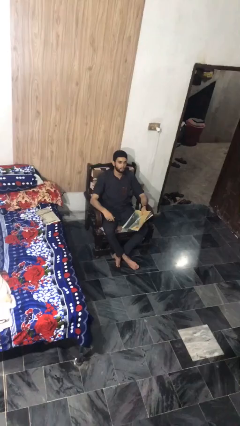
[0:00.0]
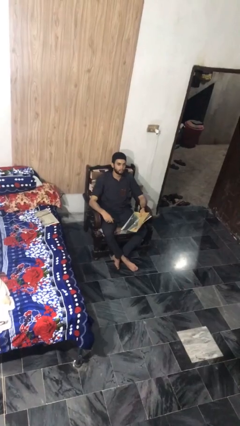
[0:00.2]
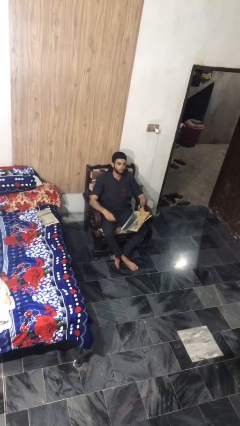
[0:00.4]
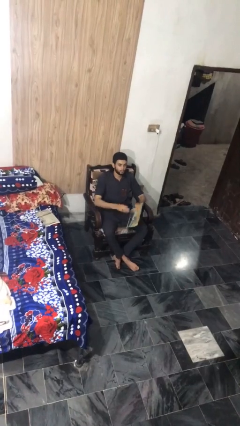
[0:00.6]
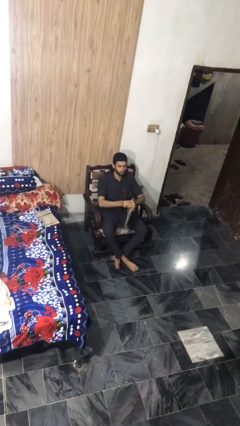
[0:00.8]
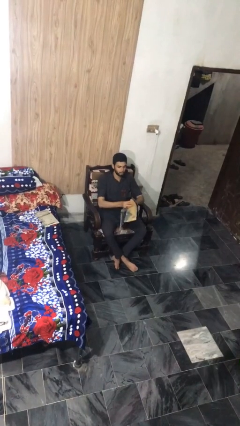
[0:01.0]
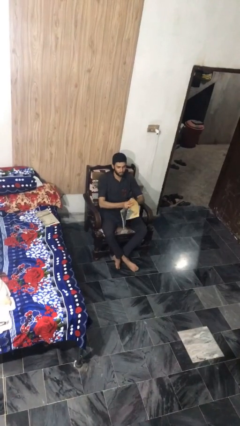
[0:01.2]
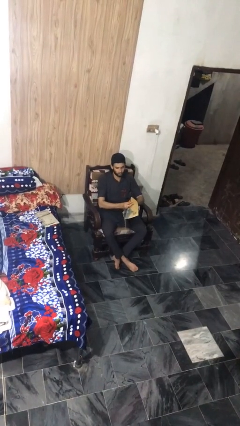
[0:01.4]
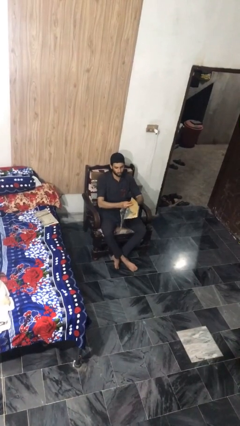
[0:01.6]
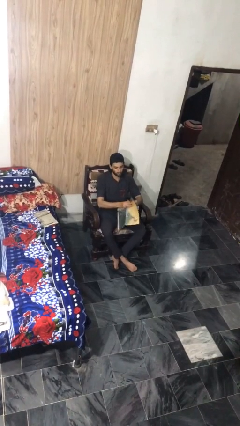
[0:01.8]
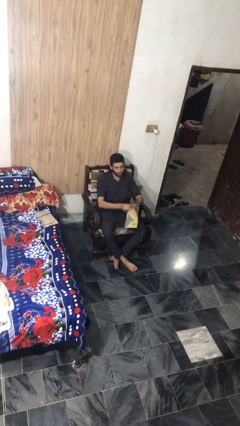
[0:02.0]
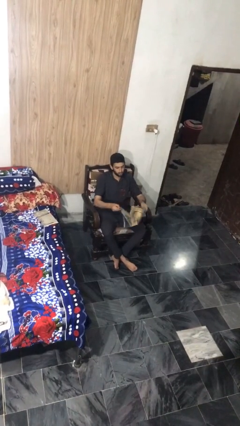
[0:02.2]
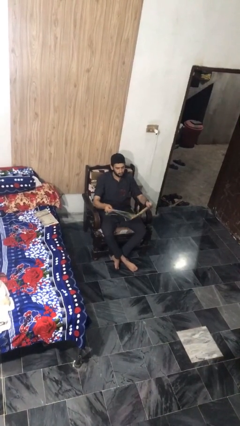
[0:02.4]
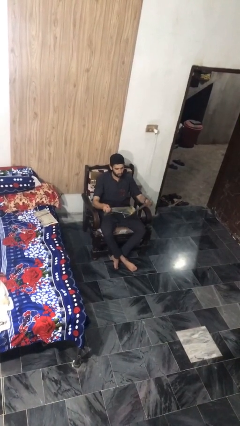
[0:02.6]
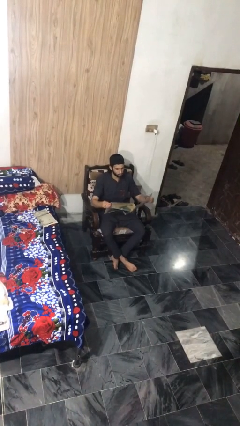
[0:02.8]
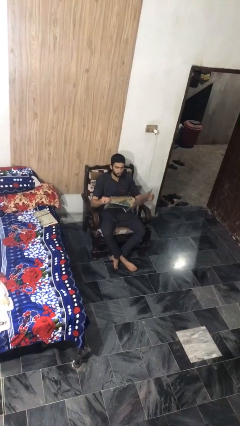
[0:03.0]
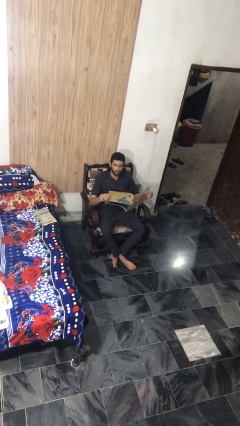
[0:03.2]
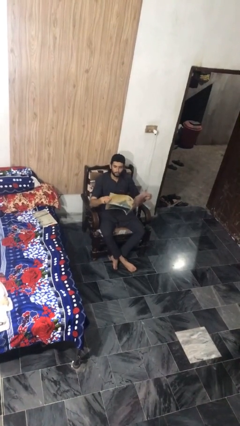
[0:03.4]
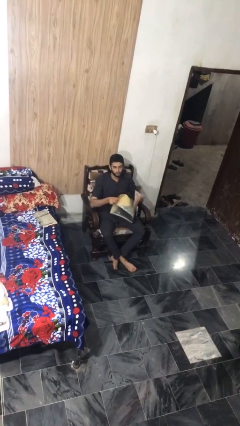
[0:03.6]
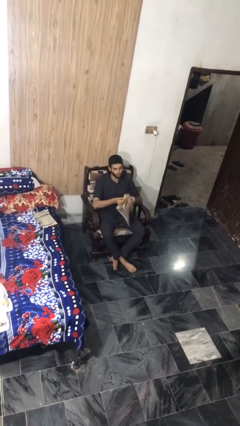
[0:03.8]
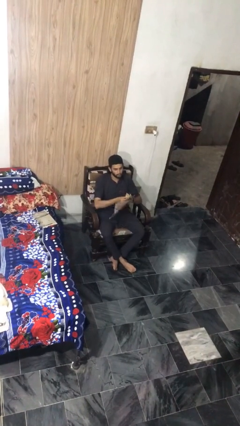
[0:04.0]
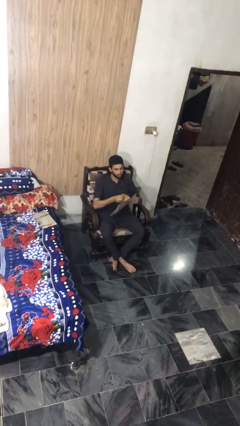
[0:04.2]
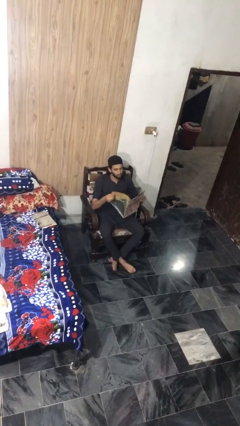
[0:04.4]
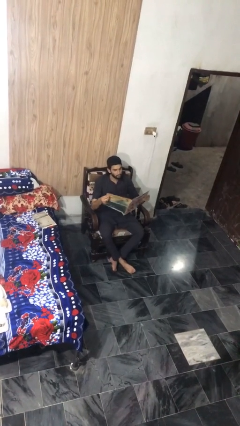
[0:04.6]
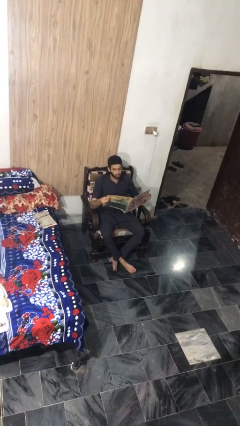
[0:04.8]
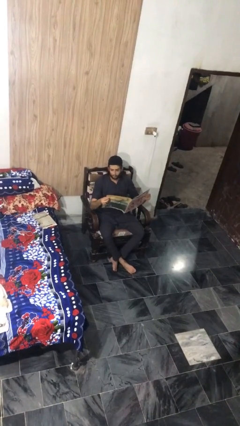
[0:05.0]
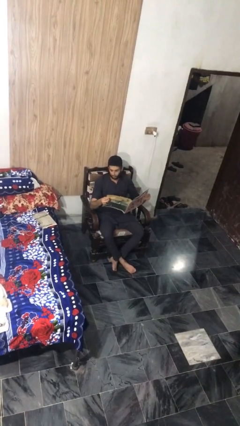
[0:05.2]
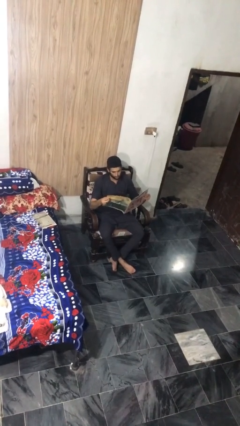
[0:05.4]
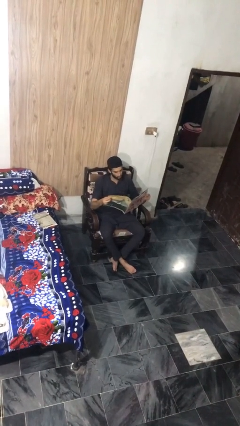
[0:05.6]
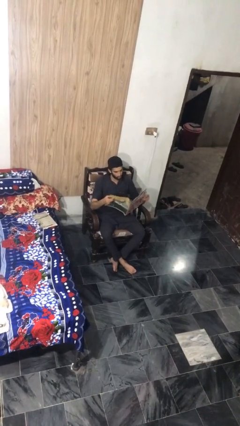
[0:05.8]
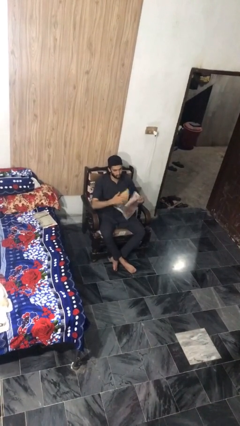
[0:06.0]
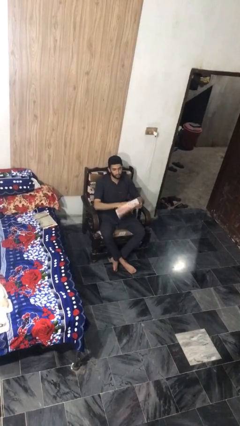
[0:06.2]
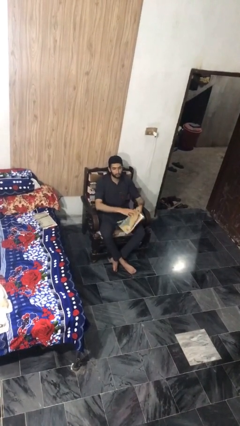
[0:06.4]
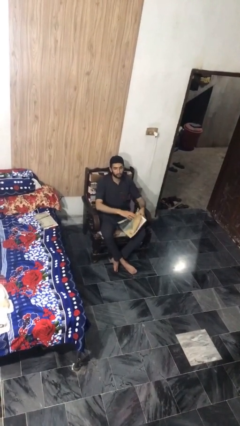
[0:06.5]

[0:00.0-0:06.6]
person reads magazine

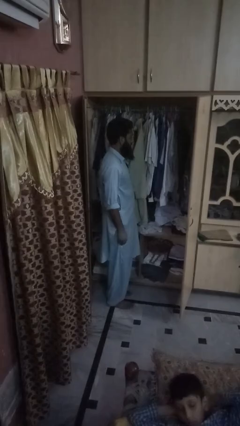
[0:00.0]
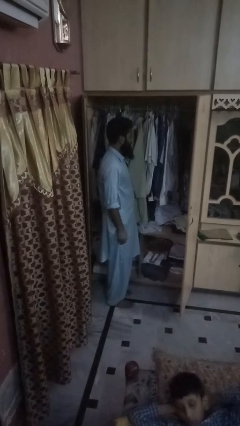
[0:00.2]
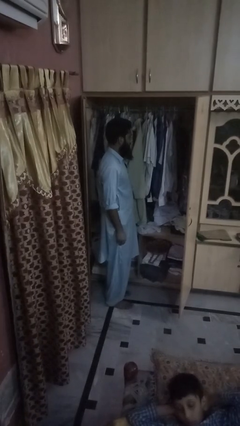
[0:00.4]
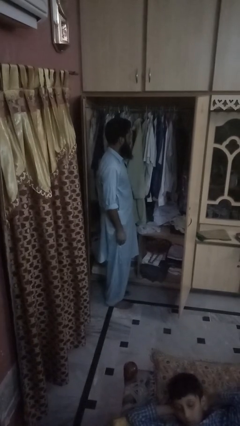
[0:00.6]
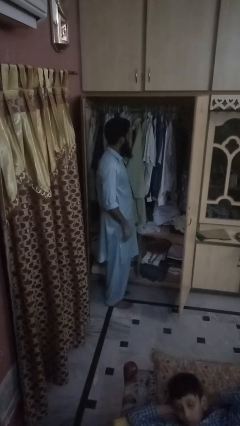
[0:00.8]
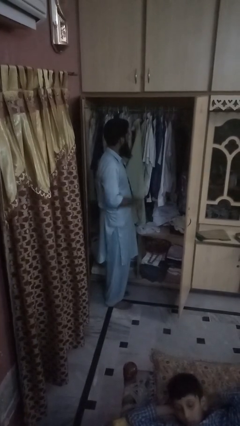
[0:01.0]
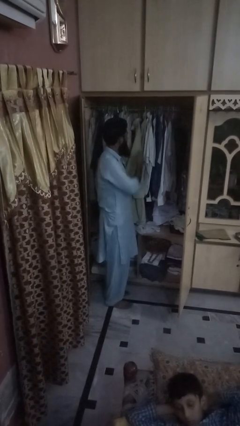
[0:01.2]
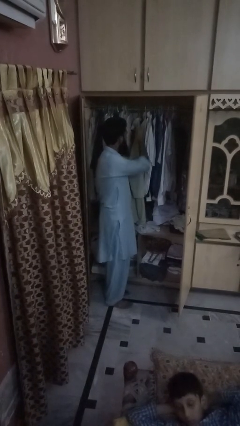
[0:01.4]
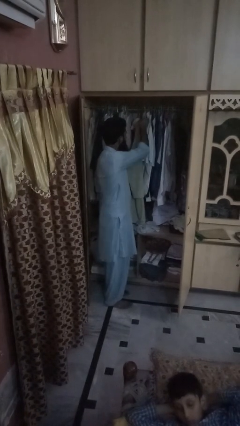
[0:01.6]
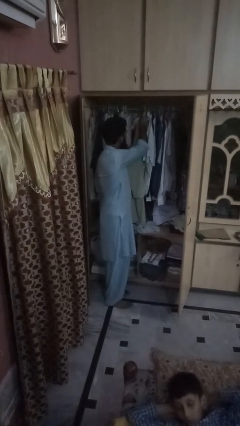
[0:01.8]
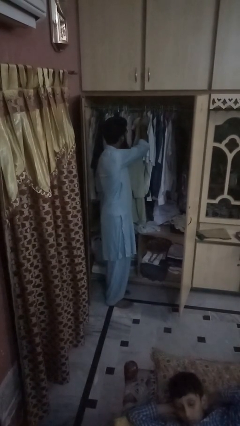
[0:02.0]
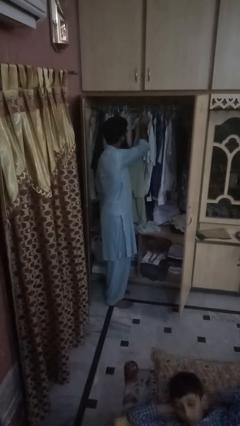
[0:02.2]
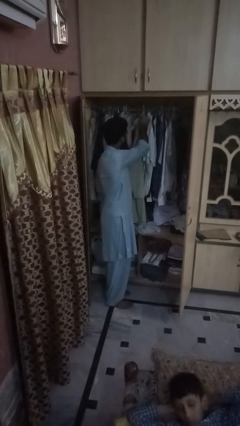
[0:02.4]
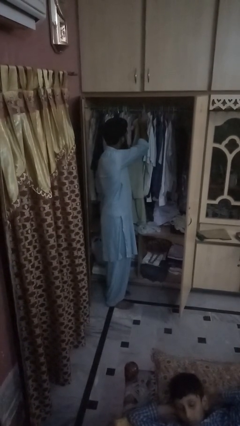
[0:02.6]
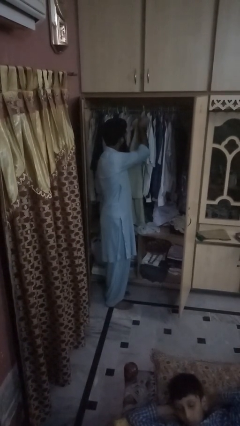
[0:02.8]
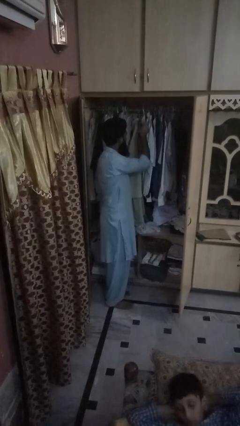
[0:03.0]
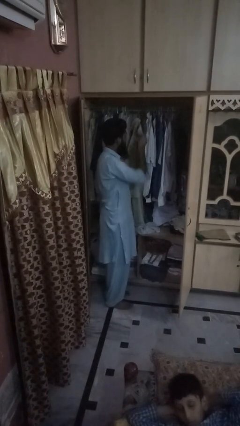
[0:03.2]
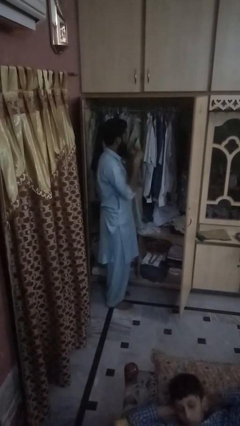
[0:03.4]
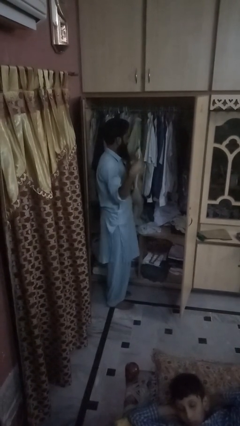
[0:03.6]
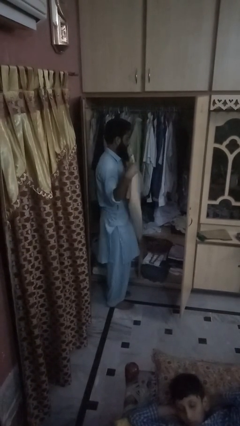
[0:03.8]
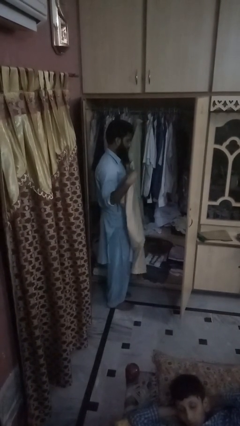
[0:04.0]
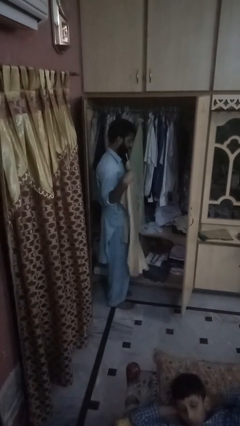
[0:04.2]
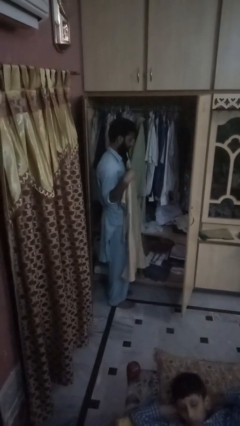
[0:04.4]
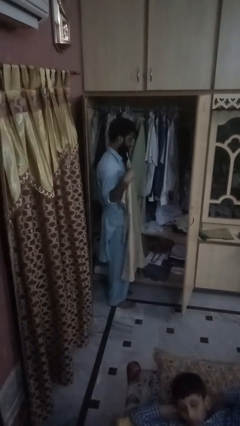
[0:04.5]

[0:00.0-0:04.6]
person puts clothes into closet

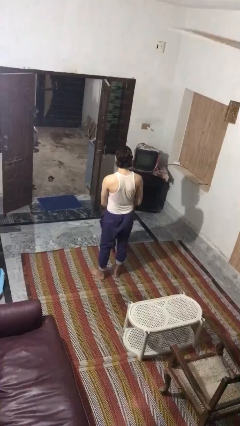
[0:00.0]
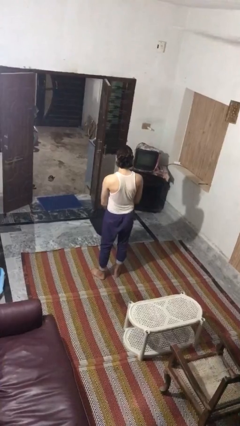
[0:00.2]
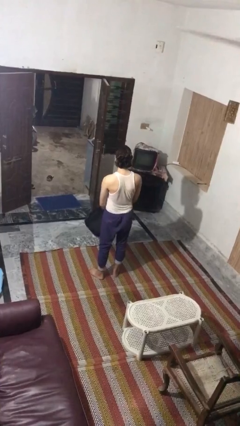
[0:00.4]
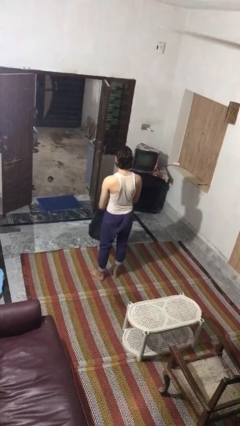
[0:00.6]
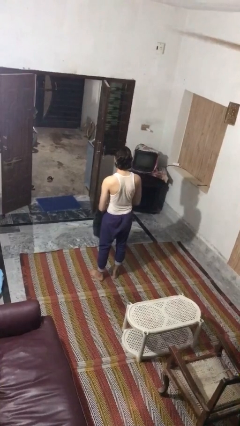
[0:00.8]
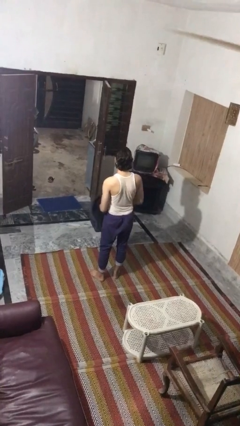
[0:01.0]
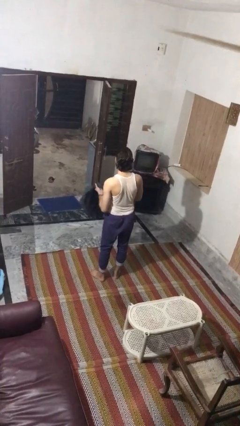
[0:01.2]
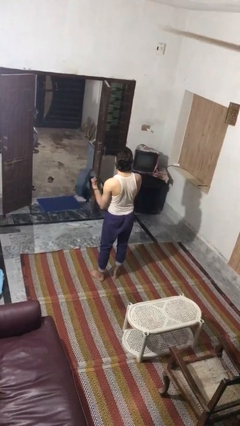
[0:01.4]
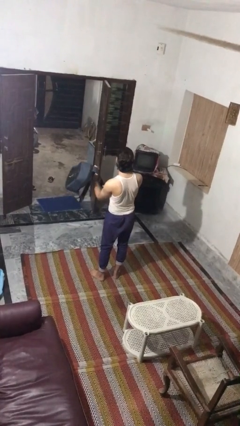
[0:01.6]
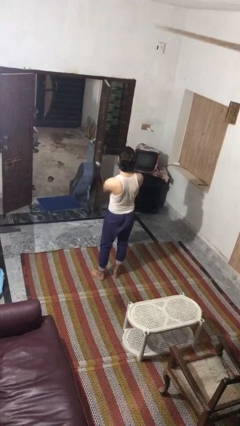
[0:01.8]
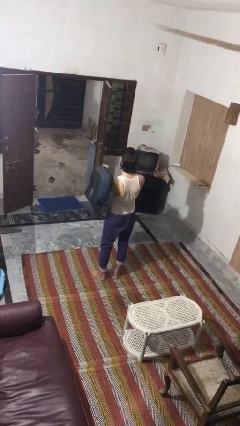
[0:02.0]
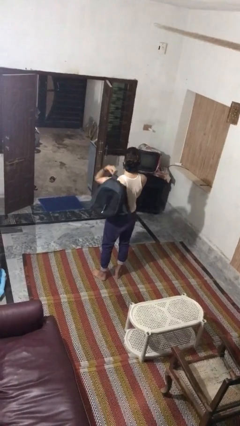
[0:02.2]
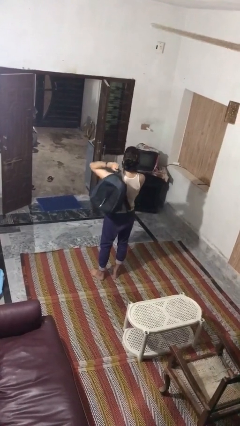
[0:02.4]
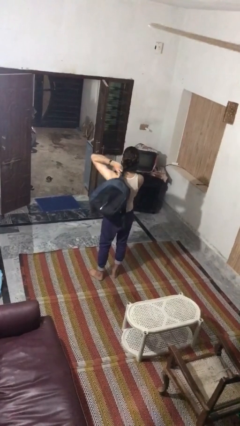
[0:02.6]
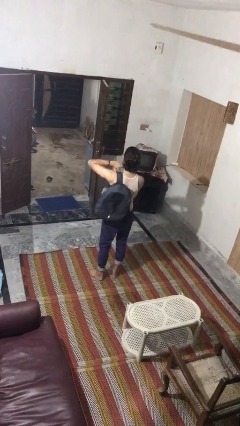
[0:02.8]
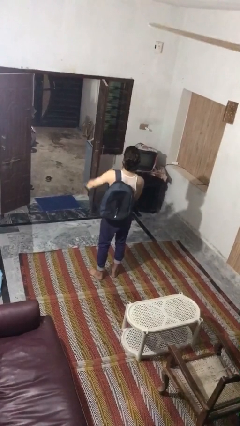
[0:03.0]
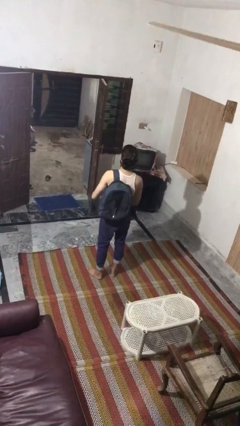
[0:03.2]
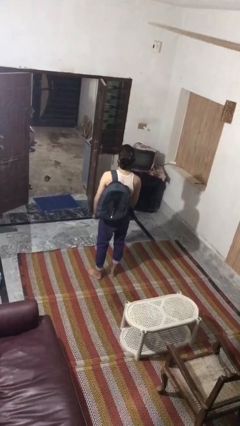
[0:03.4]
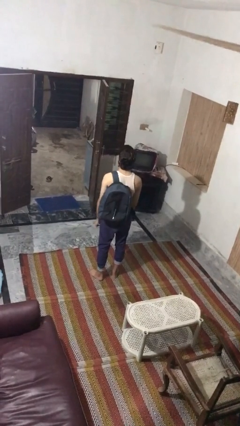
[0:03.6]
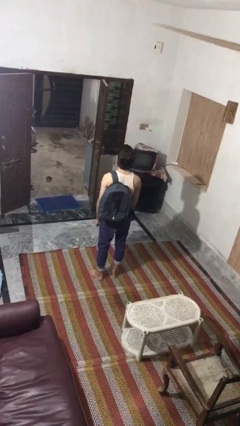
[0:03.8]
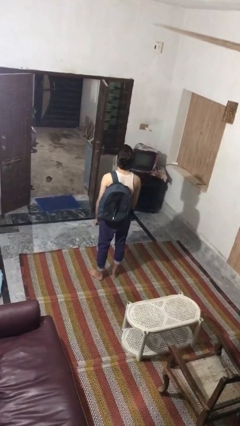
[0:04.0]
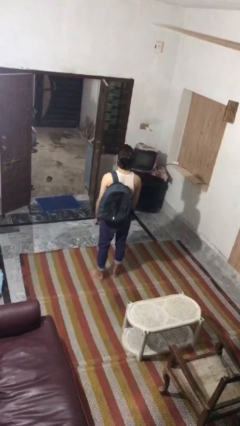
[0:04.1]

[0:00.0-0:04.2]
person puts on backpack

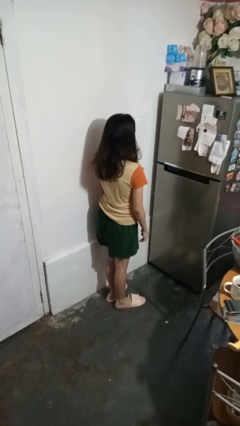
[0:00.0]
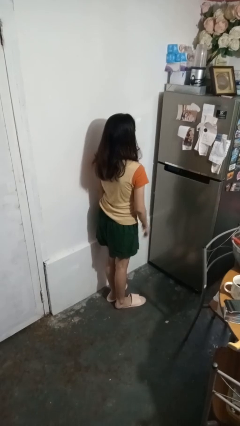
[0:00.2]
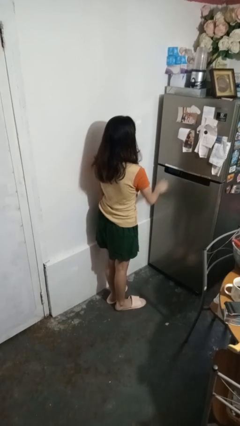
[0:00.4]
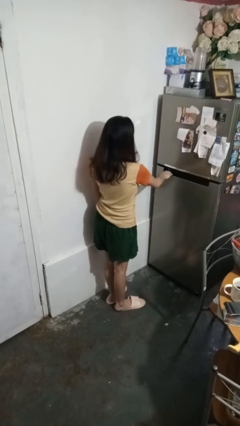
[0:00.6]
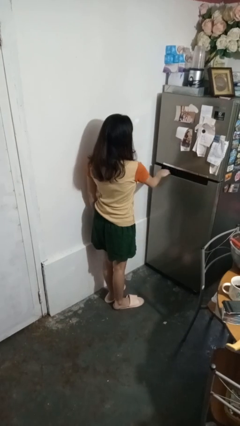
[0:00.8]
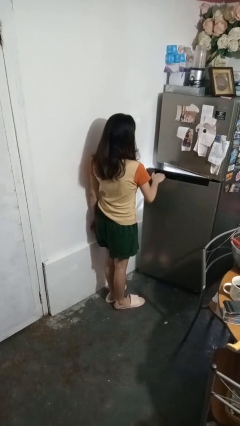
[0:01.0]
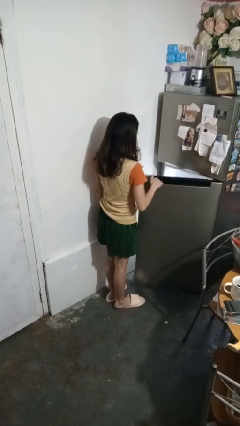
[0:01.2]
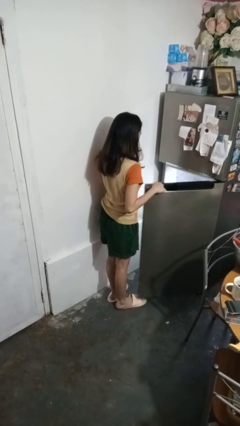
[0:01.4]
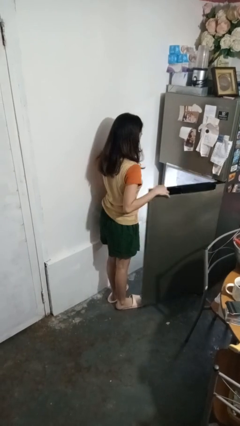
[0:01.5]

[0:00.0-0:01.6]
person opens refrigerator

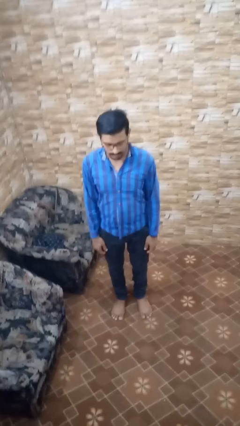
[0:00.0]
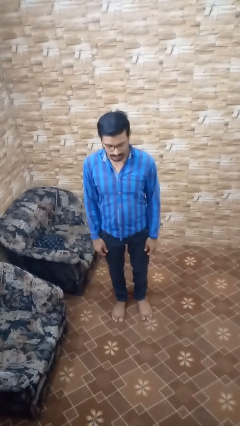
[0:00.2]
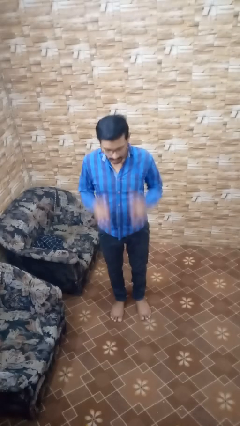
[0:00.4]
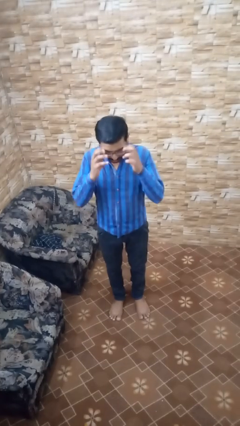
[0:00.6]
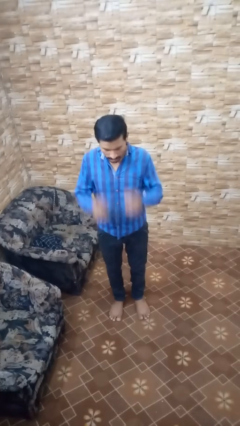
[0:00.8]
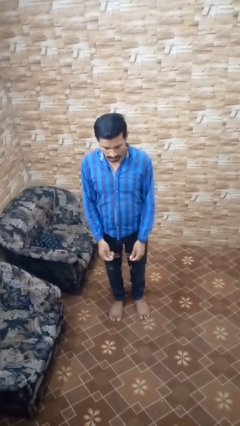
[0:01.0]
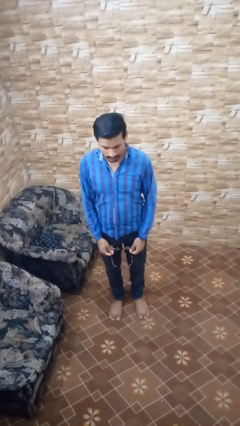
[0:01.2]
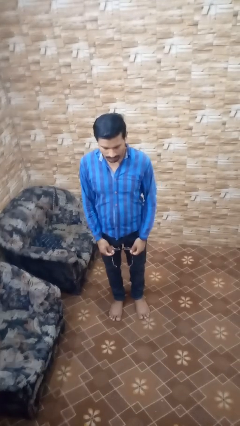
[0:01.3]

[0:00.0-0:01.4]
person takes off glasses
